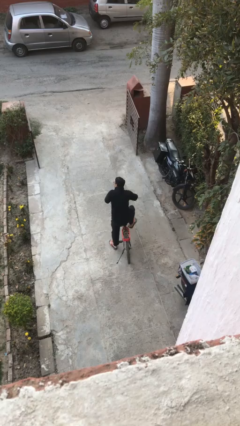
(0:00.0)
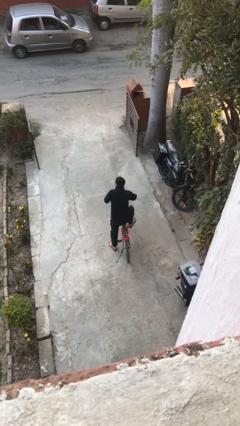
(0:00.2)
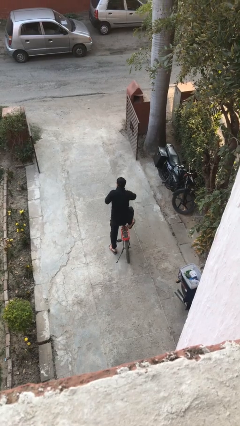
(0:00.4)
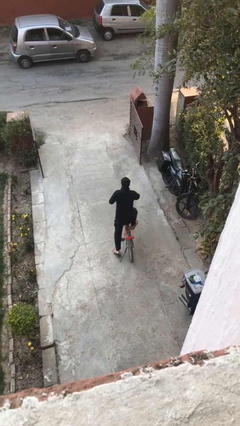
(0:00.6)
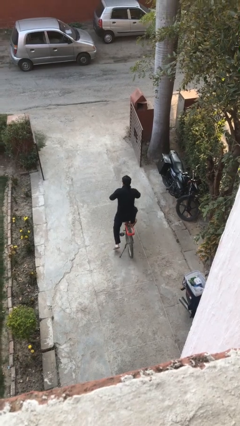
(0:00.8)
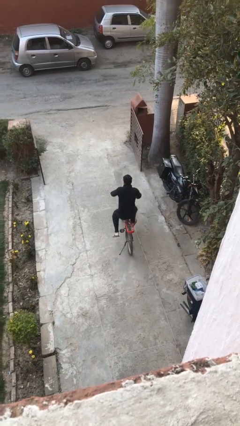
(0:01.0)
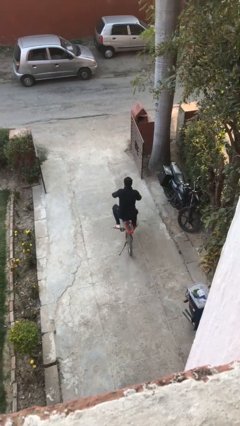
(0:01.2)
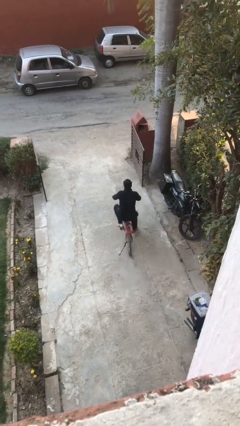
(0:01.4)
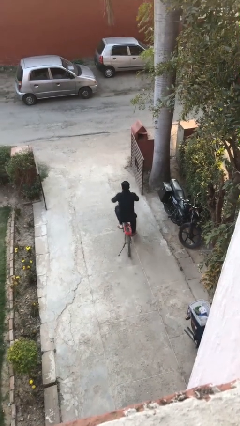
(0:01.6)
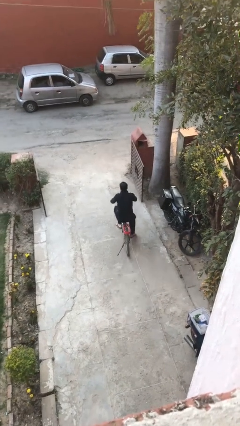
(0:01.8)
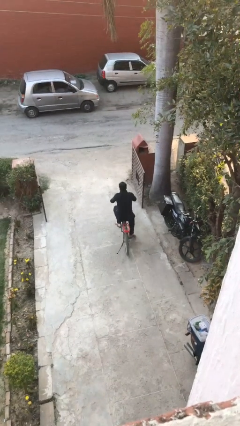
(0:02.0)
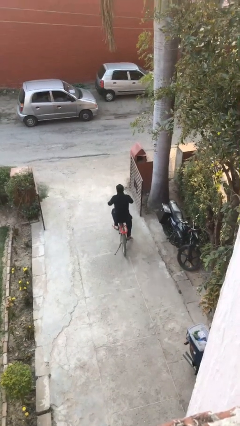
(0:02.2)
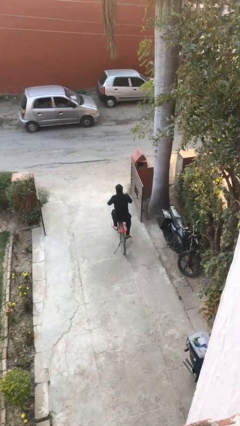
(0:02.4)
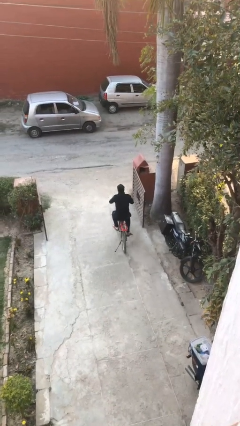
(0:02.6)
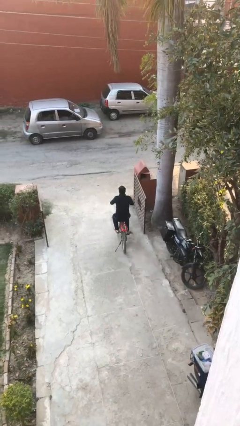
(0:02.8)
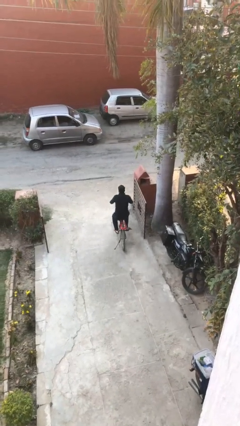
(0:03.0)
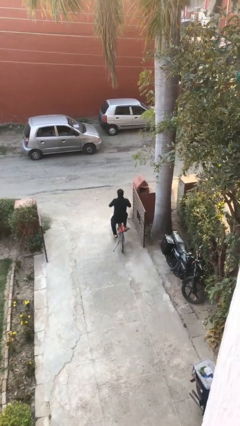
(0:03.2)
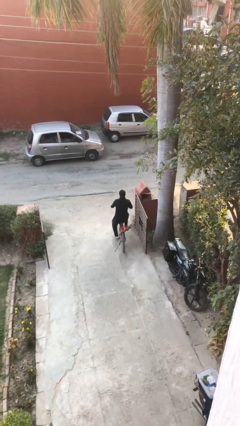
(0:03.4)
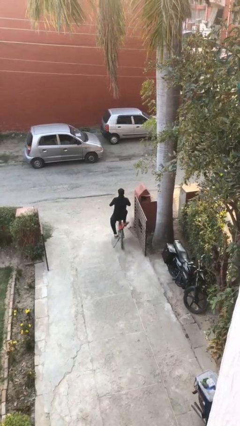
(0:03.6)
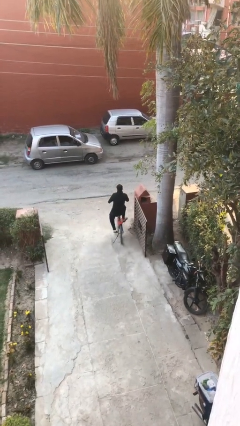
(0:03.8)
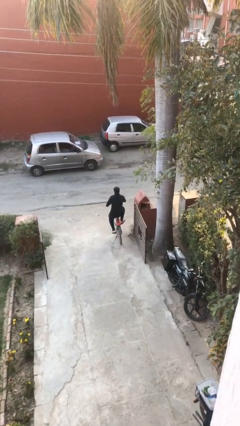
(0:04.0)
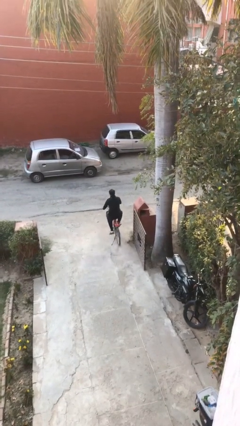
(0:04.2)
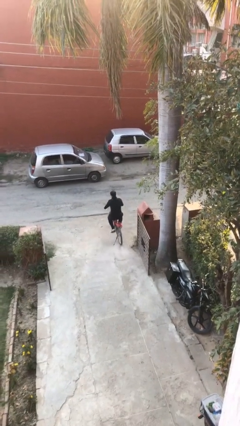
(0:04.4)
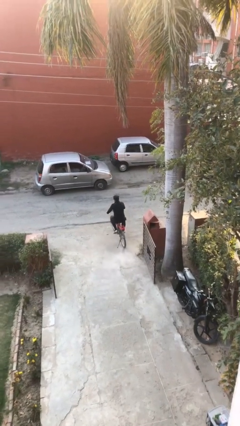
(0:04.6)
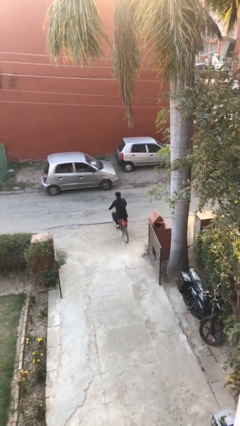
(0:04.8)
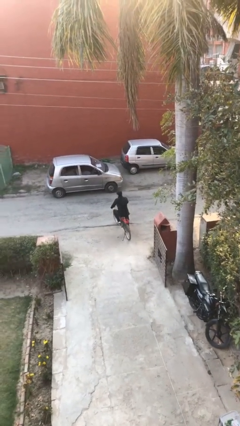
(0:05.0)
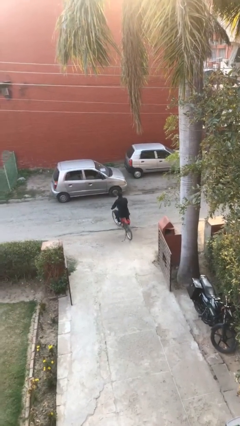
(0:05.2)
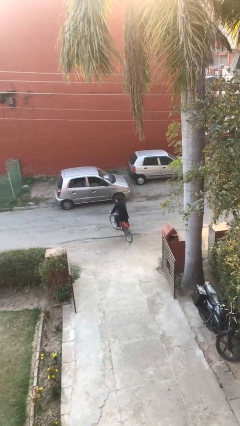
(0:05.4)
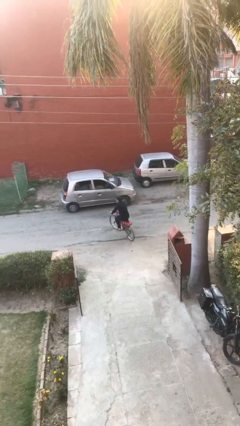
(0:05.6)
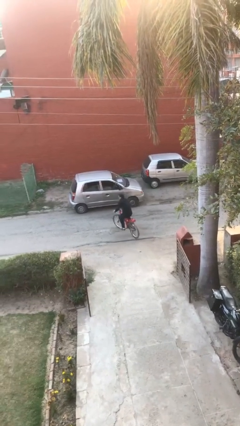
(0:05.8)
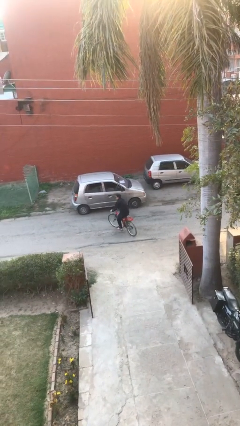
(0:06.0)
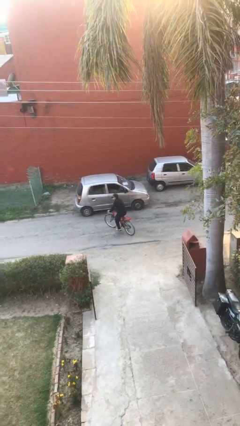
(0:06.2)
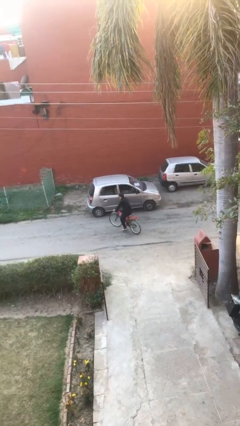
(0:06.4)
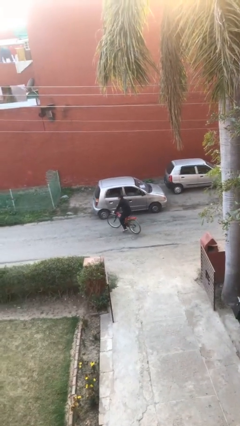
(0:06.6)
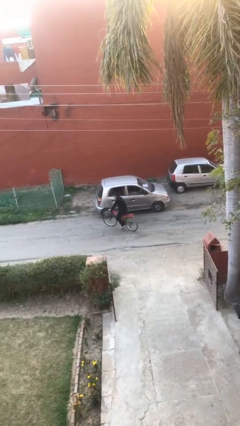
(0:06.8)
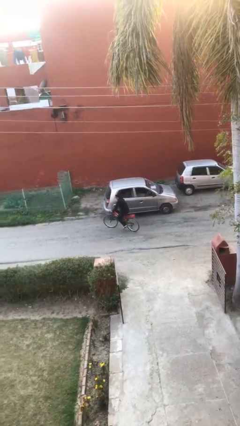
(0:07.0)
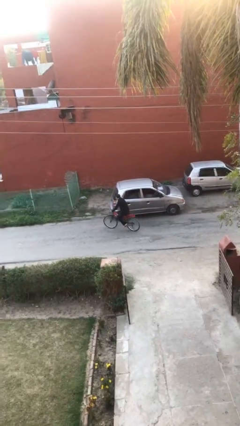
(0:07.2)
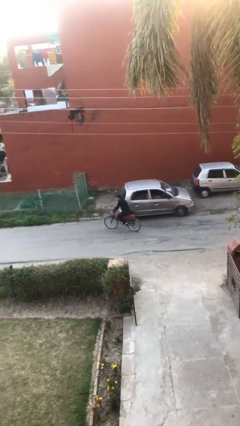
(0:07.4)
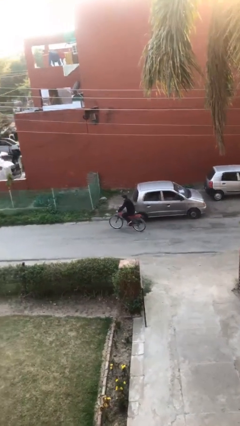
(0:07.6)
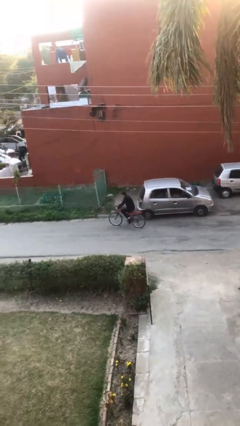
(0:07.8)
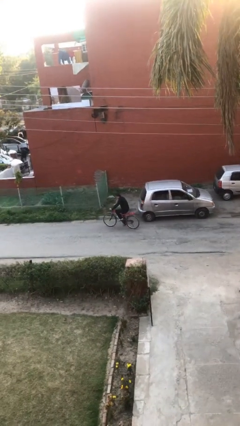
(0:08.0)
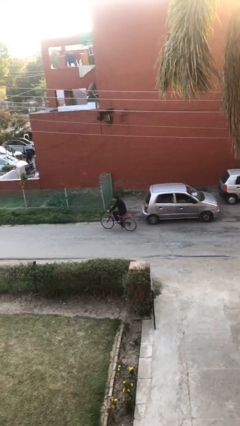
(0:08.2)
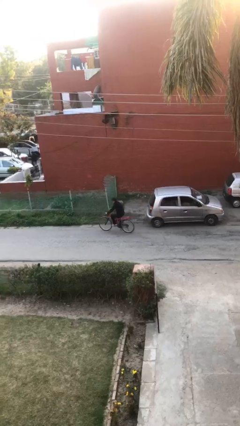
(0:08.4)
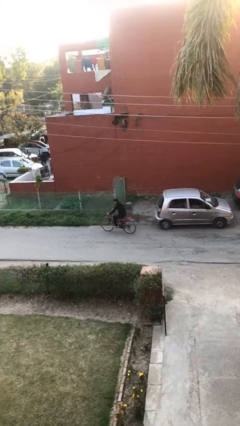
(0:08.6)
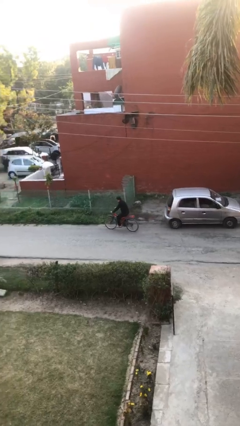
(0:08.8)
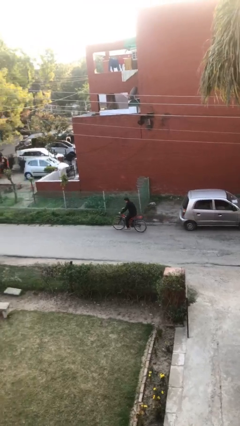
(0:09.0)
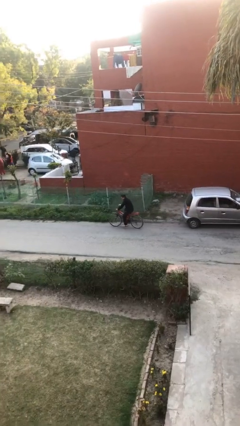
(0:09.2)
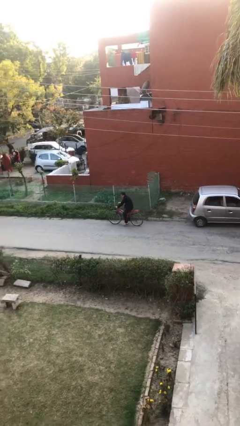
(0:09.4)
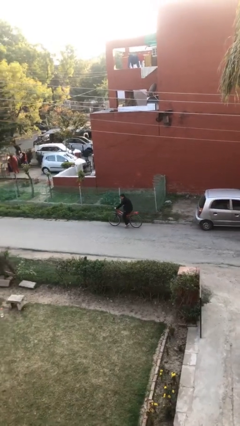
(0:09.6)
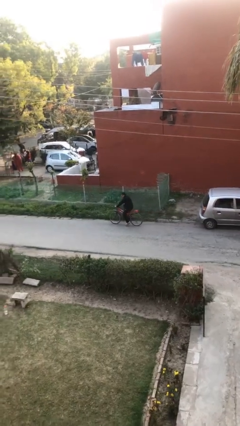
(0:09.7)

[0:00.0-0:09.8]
person rides bicycle

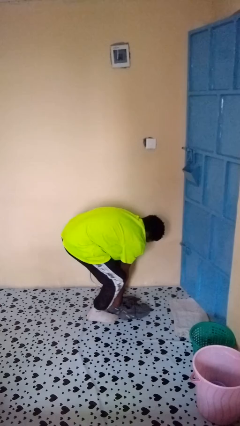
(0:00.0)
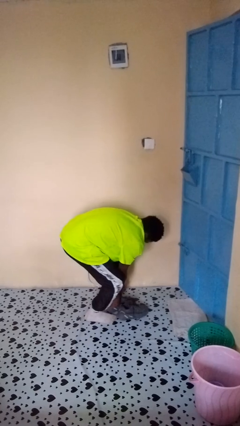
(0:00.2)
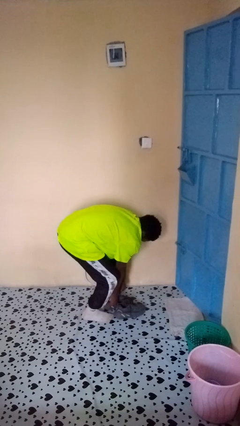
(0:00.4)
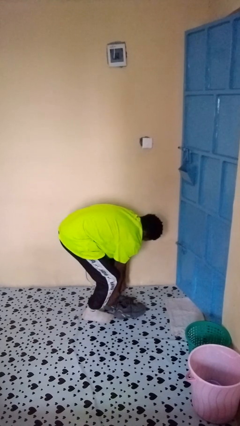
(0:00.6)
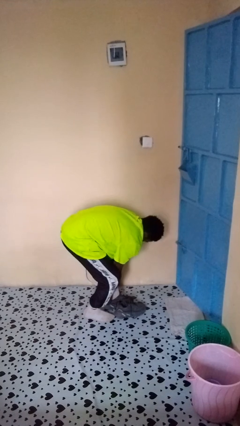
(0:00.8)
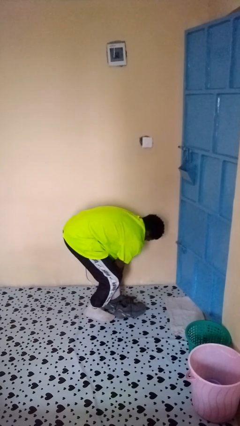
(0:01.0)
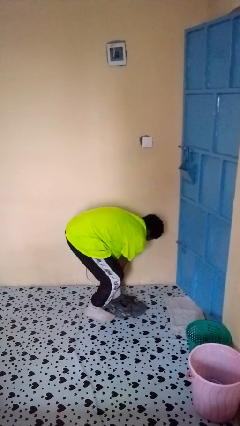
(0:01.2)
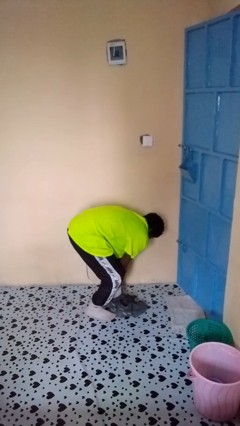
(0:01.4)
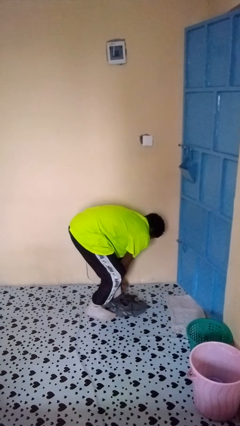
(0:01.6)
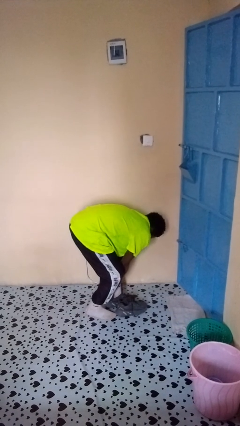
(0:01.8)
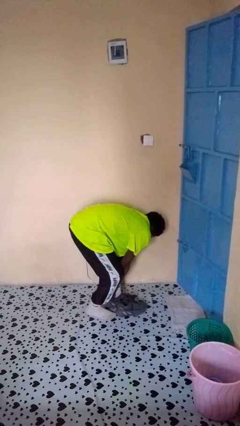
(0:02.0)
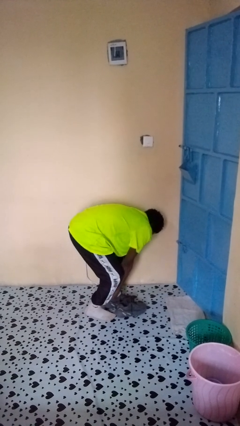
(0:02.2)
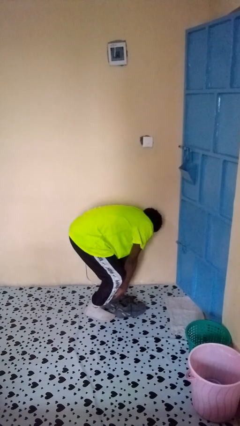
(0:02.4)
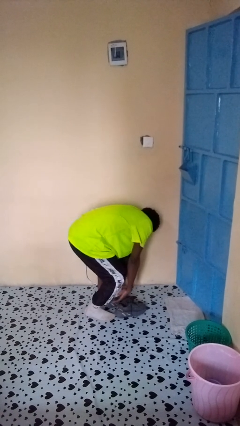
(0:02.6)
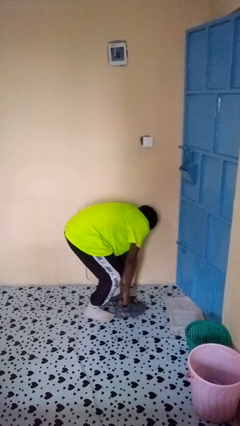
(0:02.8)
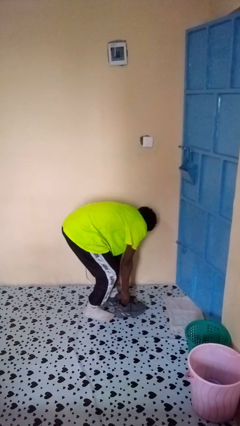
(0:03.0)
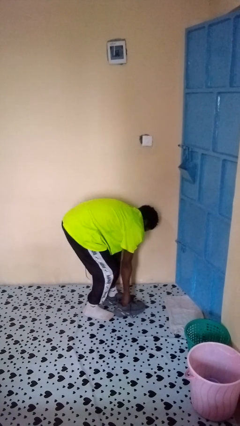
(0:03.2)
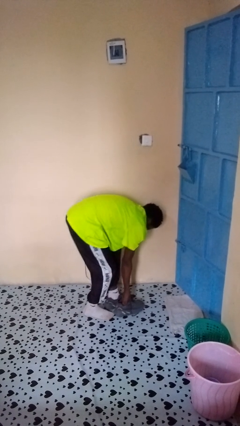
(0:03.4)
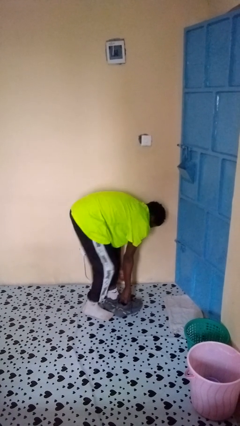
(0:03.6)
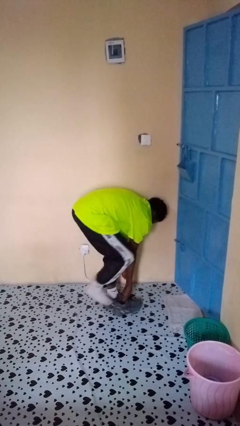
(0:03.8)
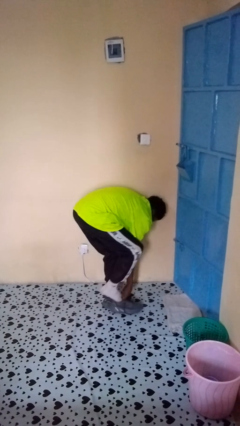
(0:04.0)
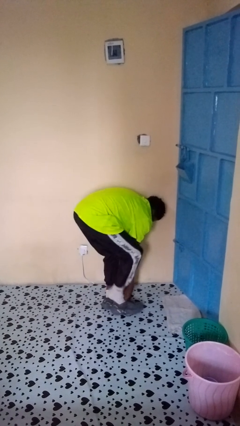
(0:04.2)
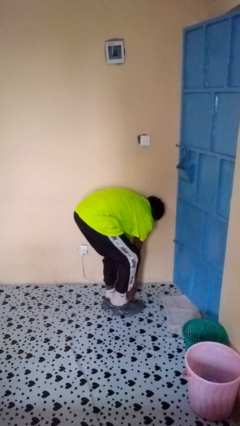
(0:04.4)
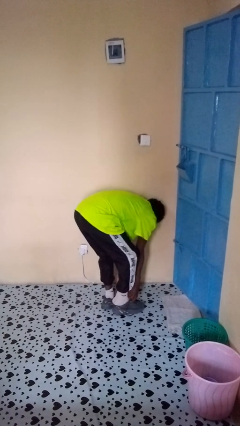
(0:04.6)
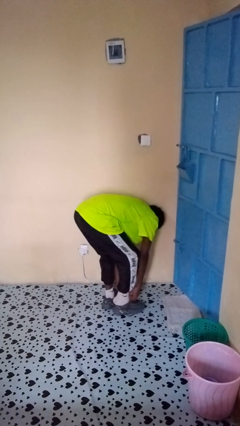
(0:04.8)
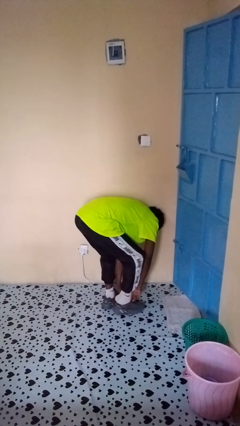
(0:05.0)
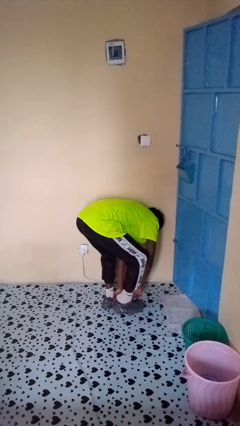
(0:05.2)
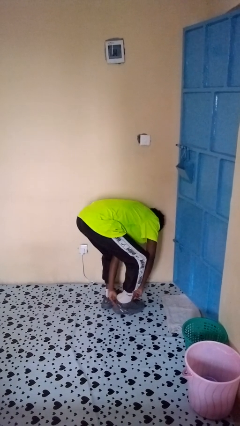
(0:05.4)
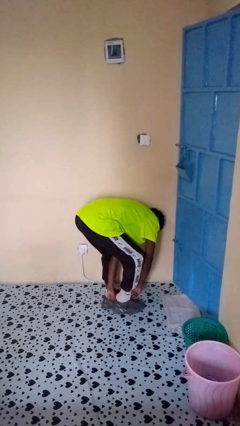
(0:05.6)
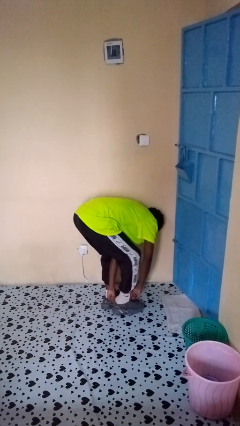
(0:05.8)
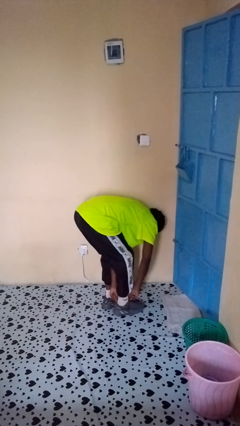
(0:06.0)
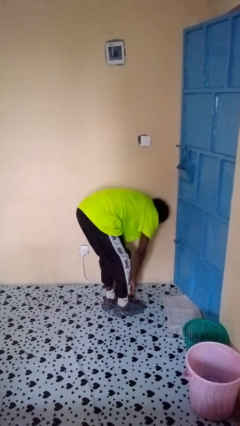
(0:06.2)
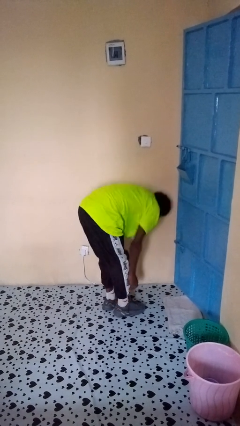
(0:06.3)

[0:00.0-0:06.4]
person puts on shoes

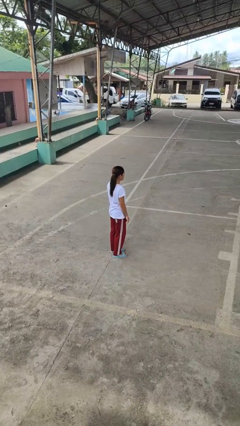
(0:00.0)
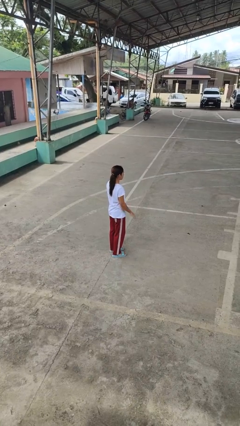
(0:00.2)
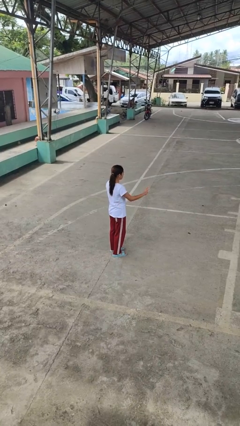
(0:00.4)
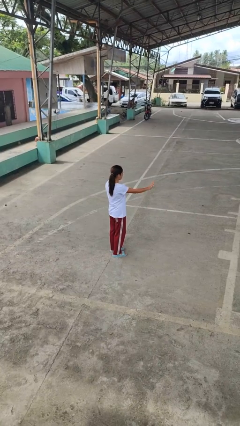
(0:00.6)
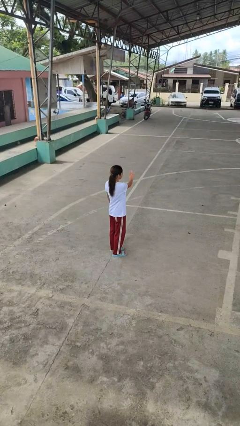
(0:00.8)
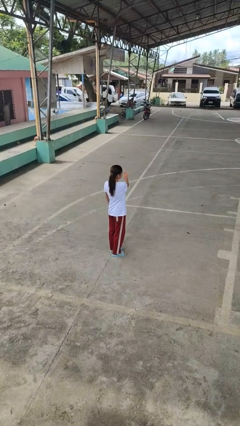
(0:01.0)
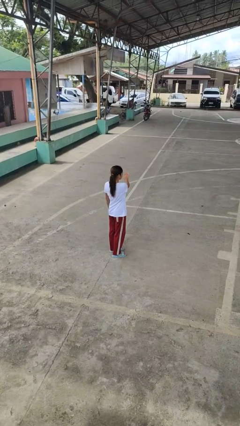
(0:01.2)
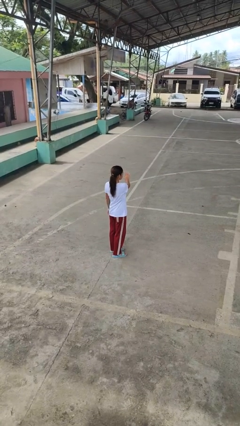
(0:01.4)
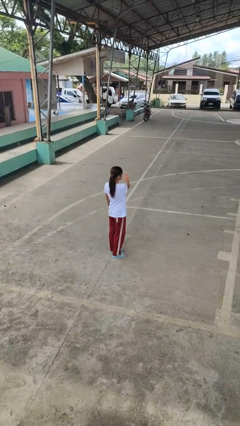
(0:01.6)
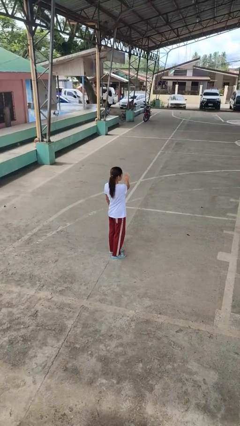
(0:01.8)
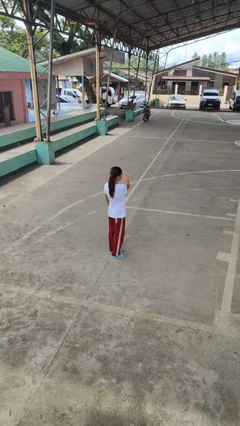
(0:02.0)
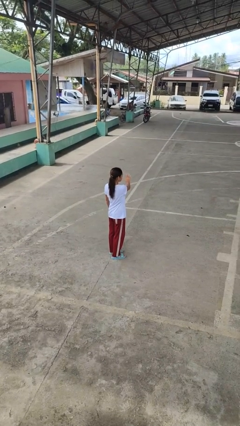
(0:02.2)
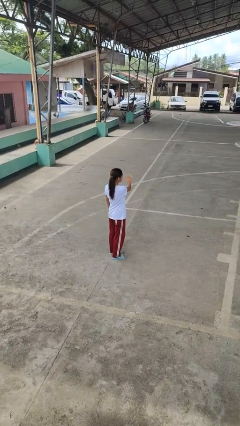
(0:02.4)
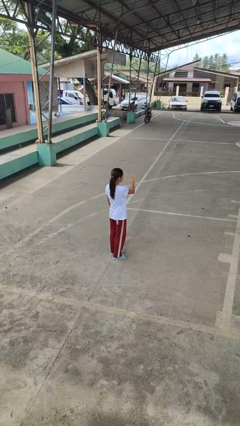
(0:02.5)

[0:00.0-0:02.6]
person gestures swipe left
